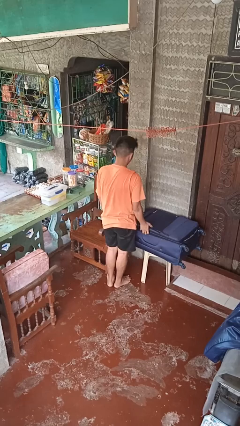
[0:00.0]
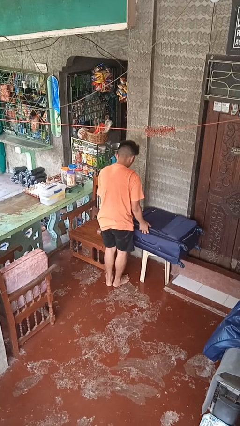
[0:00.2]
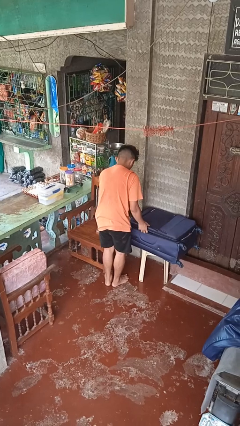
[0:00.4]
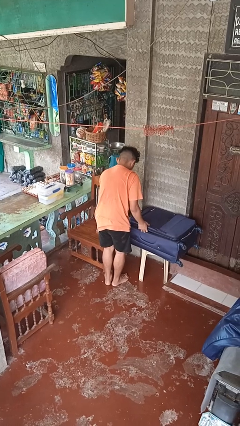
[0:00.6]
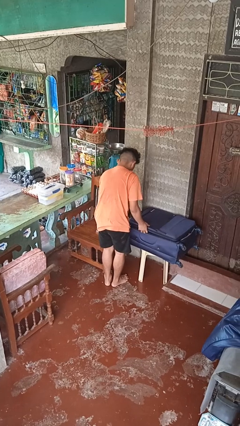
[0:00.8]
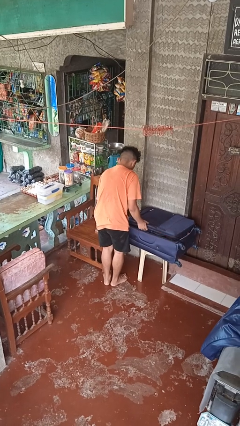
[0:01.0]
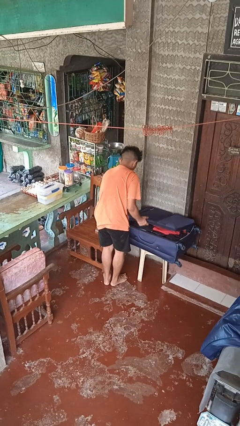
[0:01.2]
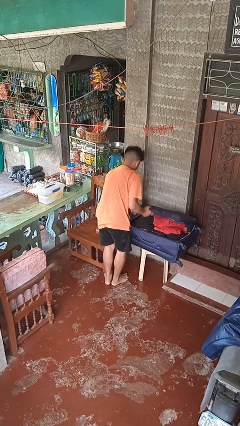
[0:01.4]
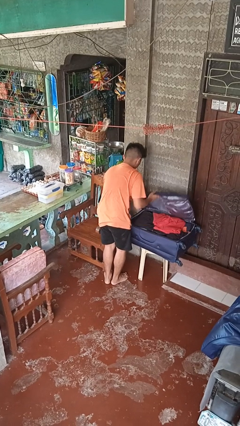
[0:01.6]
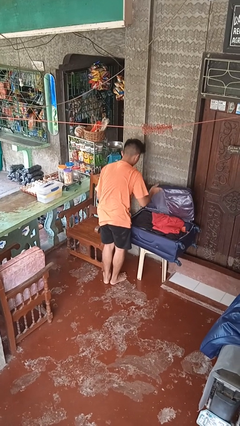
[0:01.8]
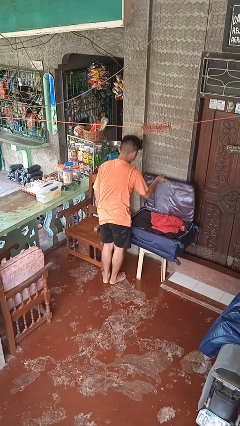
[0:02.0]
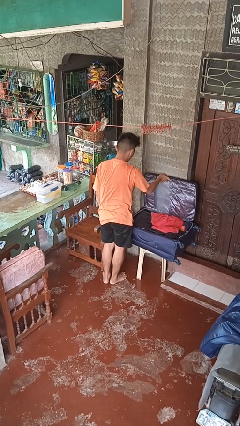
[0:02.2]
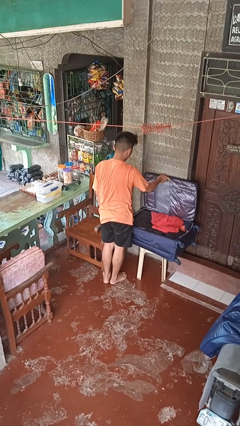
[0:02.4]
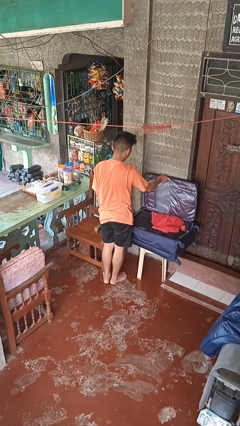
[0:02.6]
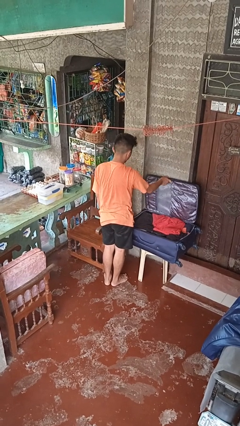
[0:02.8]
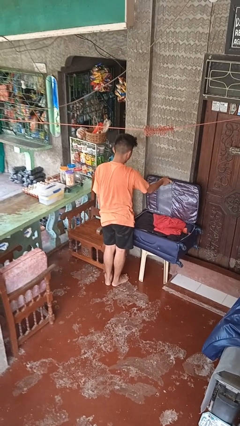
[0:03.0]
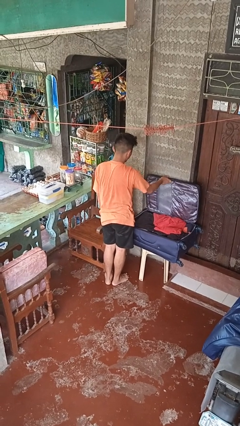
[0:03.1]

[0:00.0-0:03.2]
person opens suitcase

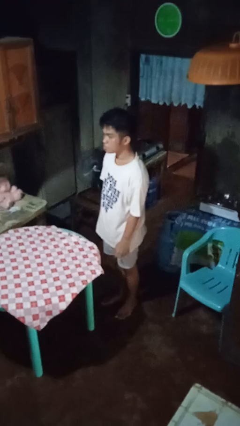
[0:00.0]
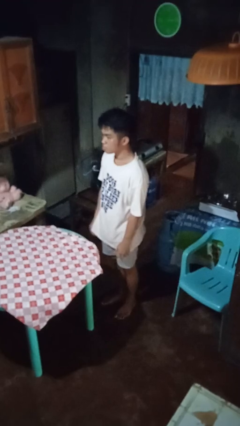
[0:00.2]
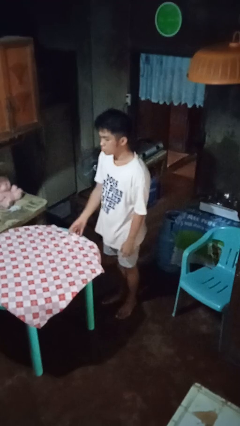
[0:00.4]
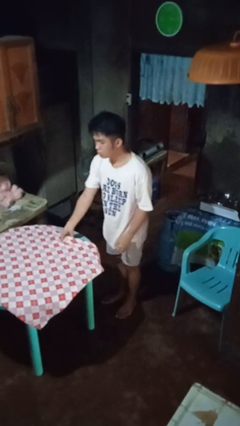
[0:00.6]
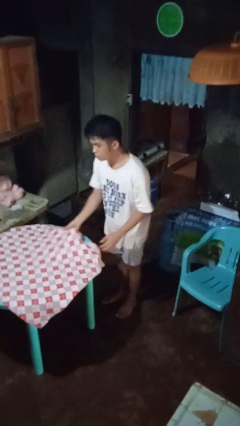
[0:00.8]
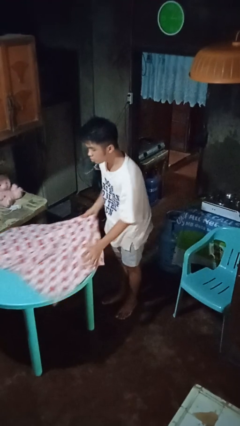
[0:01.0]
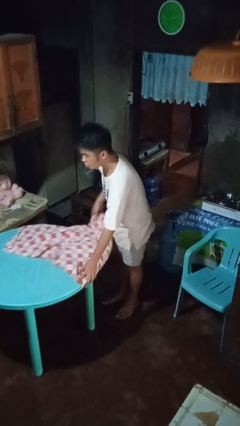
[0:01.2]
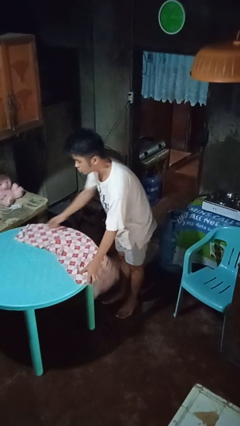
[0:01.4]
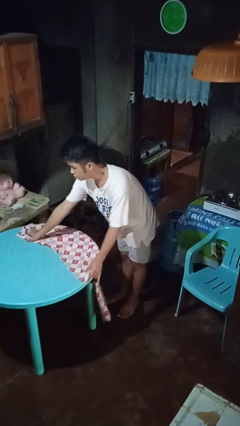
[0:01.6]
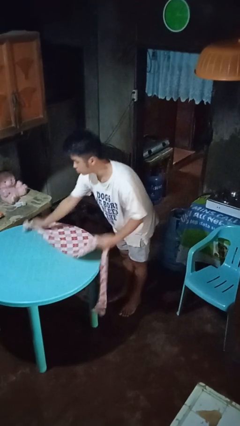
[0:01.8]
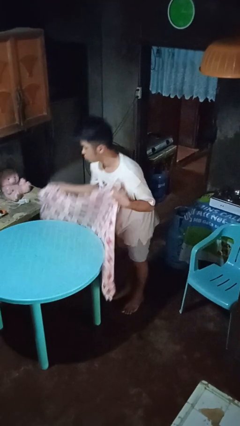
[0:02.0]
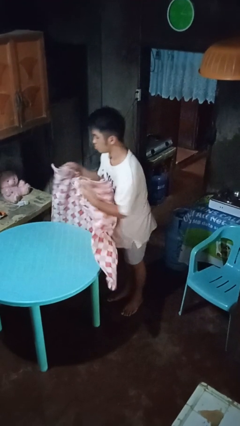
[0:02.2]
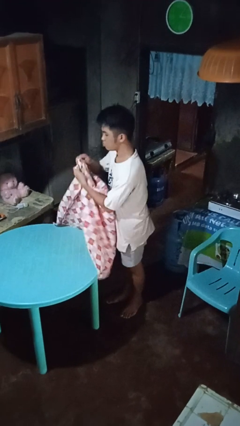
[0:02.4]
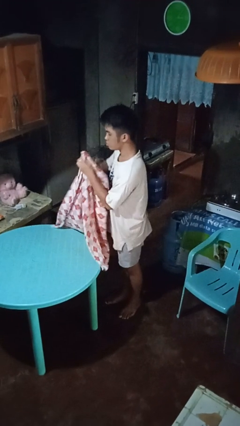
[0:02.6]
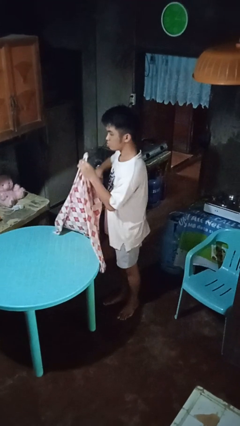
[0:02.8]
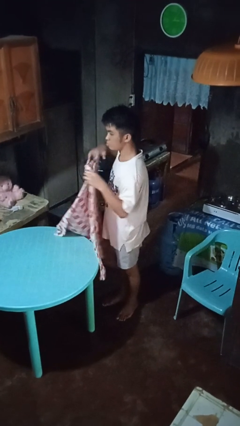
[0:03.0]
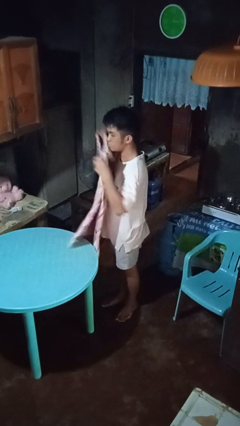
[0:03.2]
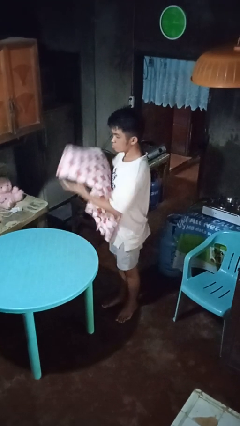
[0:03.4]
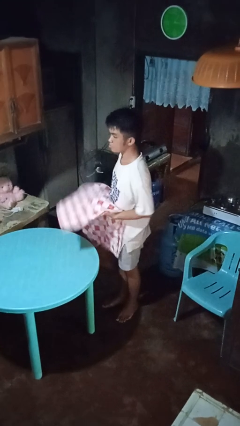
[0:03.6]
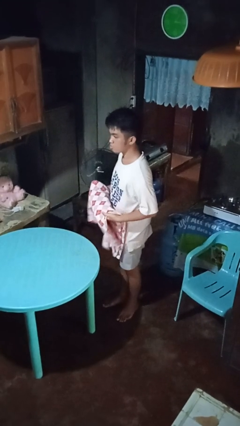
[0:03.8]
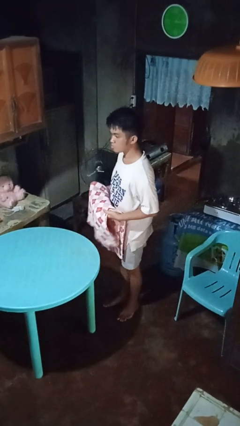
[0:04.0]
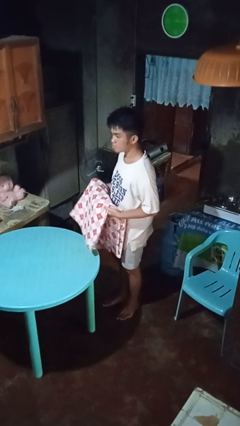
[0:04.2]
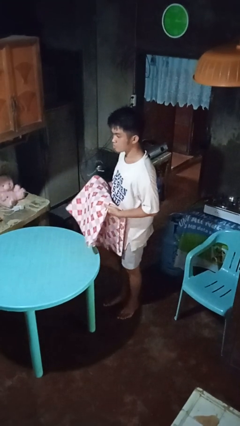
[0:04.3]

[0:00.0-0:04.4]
person folds tablecloth

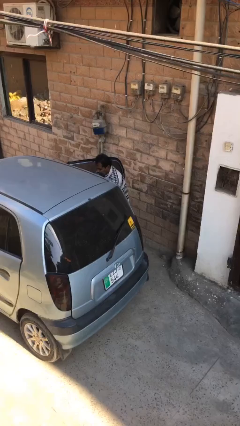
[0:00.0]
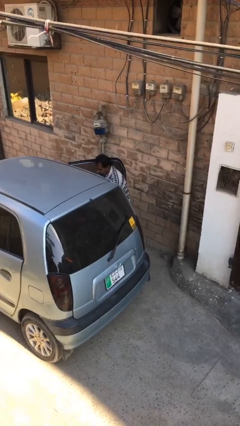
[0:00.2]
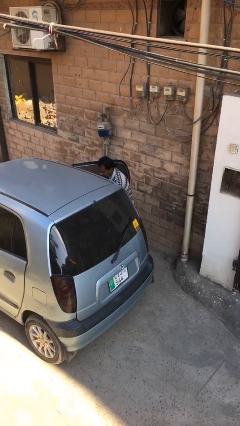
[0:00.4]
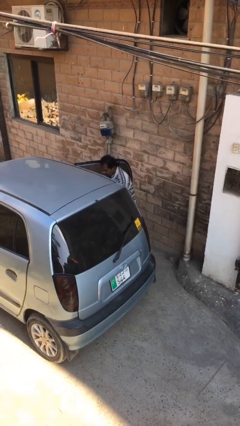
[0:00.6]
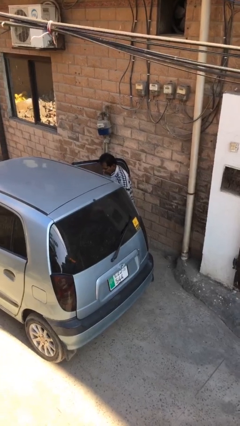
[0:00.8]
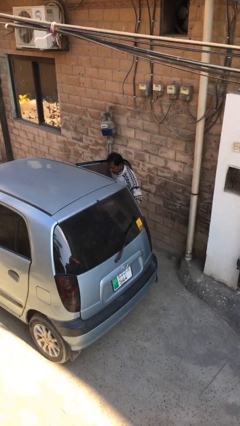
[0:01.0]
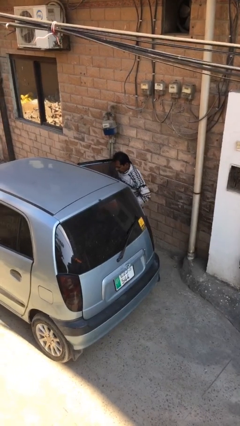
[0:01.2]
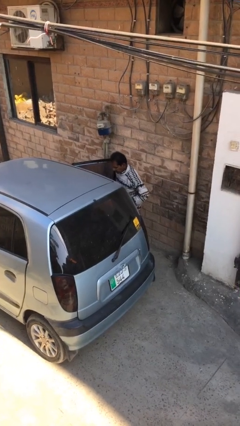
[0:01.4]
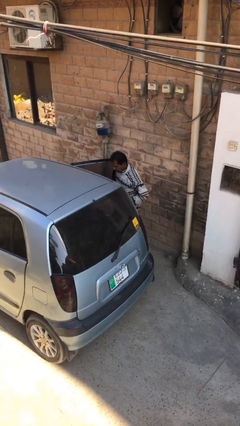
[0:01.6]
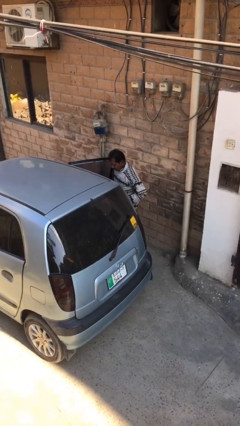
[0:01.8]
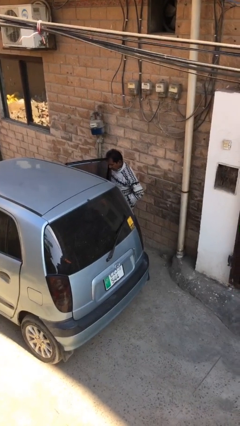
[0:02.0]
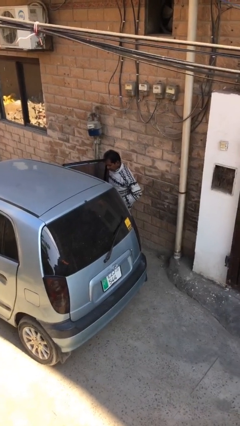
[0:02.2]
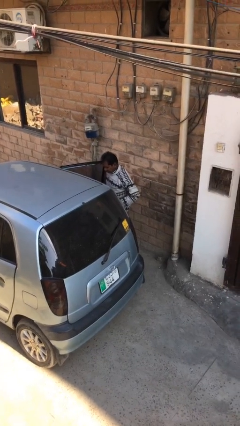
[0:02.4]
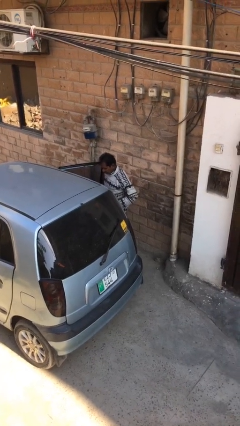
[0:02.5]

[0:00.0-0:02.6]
person unloads car

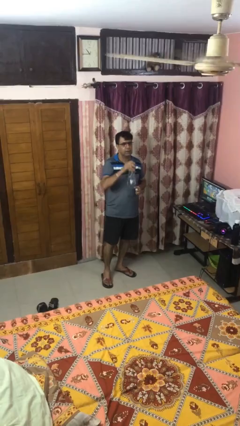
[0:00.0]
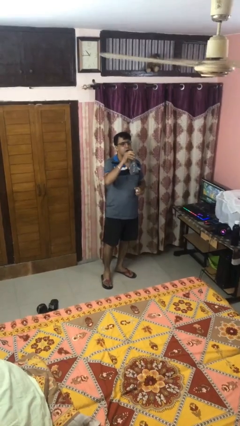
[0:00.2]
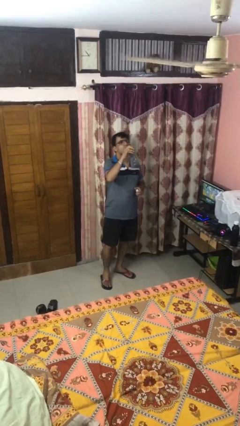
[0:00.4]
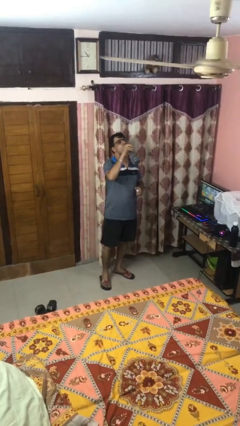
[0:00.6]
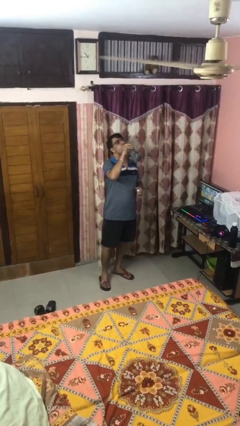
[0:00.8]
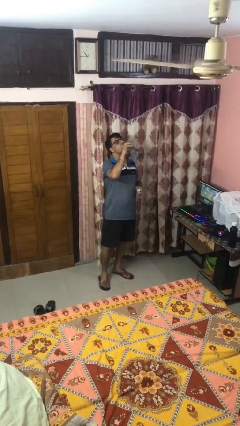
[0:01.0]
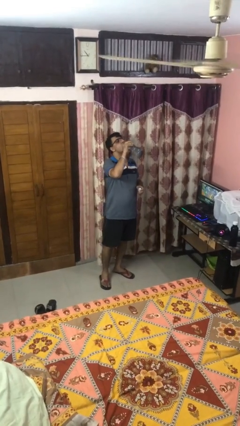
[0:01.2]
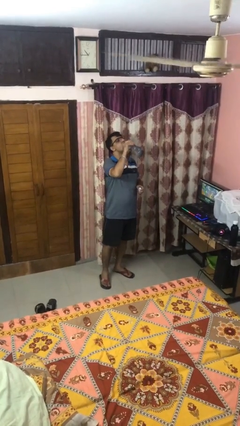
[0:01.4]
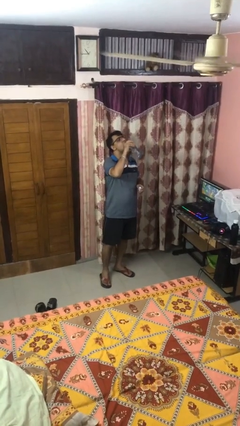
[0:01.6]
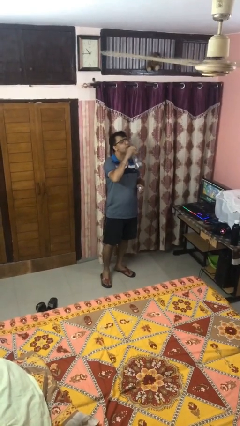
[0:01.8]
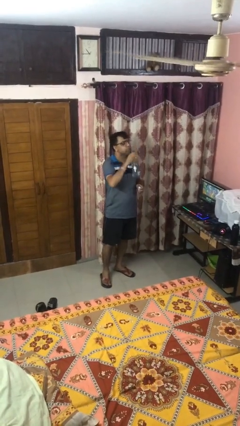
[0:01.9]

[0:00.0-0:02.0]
person drinks from bottle

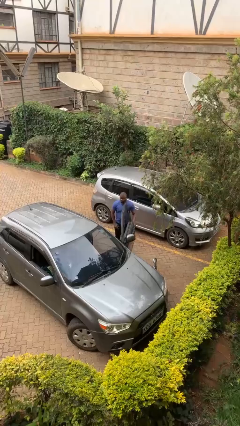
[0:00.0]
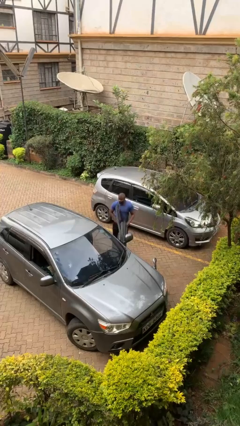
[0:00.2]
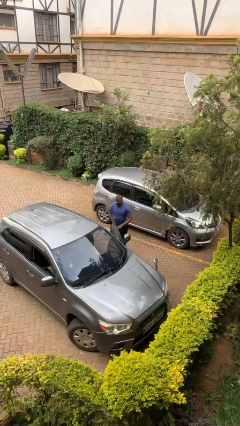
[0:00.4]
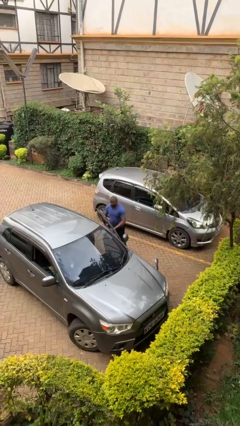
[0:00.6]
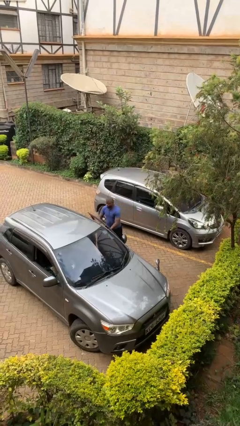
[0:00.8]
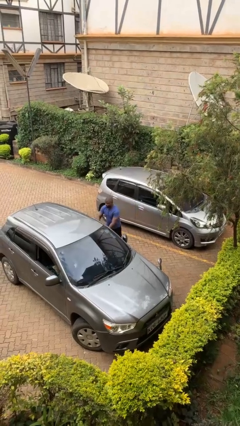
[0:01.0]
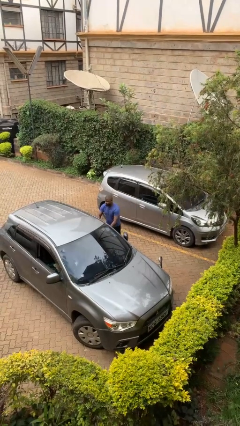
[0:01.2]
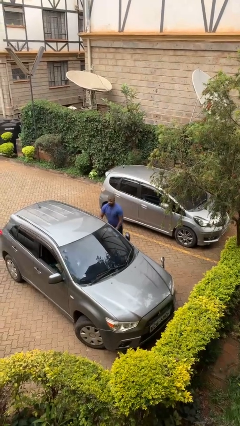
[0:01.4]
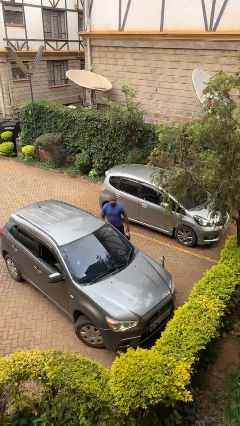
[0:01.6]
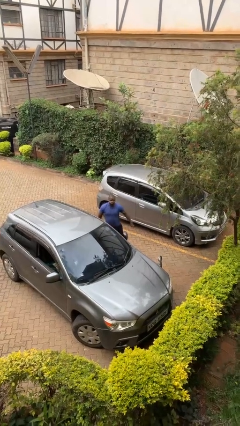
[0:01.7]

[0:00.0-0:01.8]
person closes car door

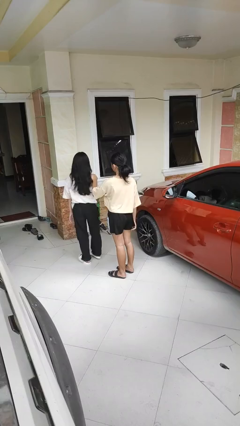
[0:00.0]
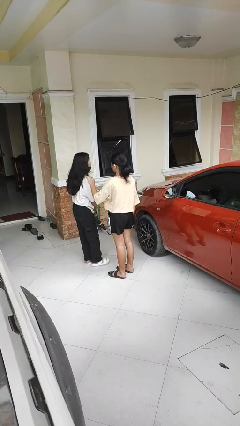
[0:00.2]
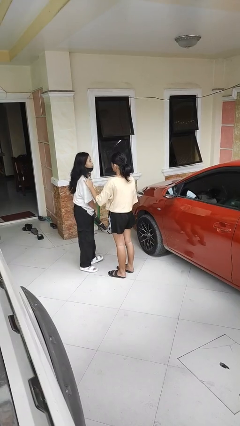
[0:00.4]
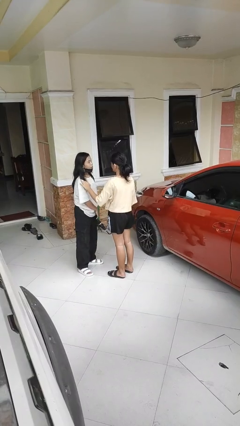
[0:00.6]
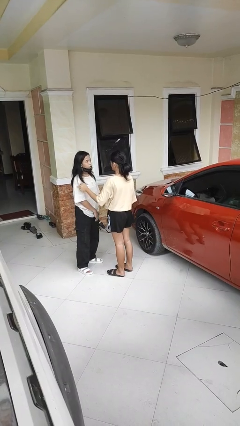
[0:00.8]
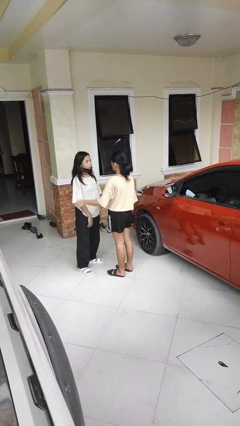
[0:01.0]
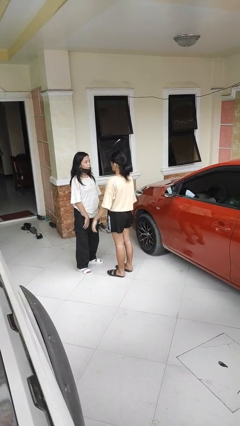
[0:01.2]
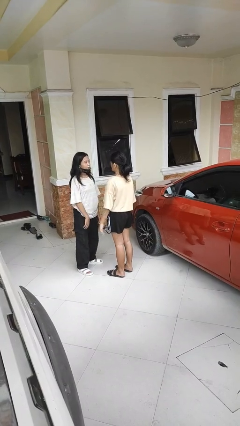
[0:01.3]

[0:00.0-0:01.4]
person spins person around

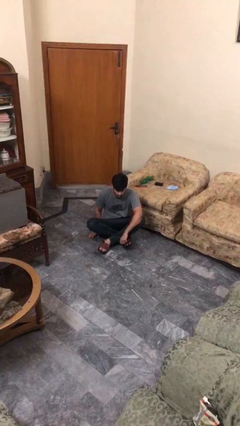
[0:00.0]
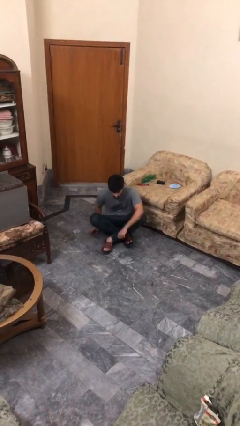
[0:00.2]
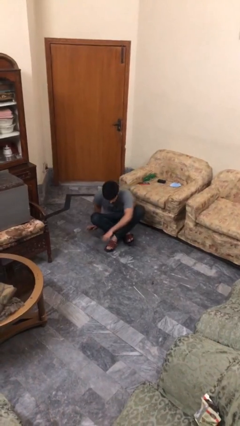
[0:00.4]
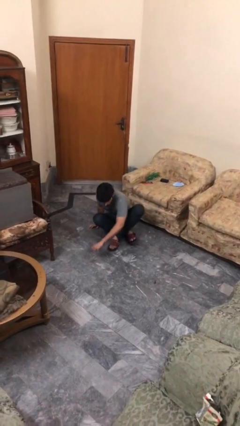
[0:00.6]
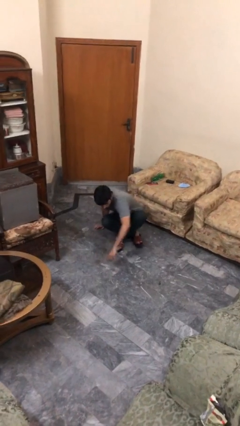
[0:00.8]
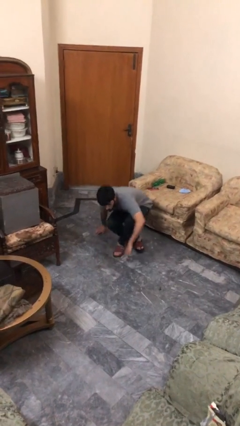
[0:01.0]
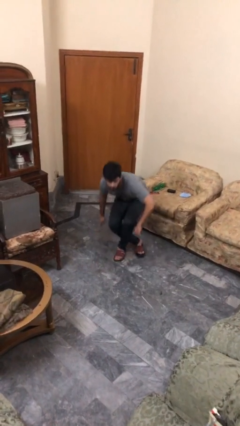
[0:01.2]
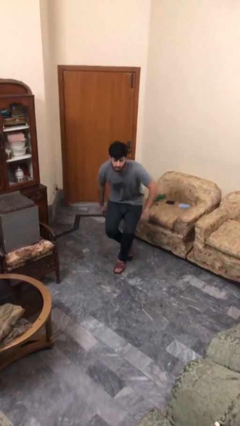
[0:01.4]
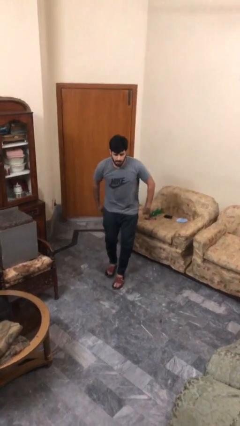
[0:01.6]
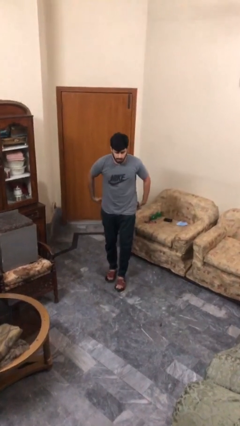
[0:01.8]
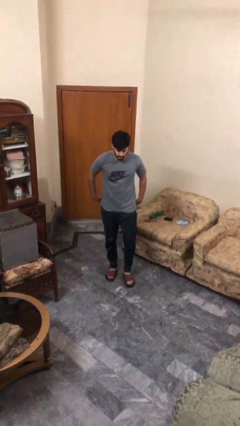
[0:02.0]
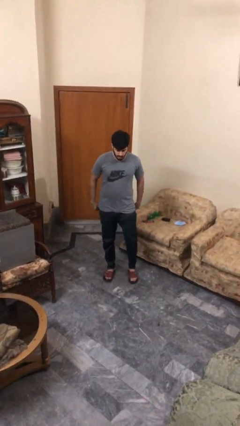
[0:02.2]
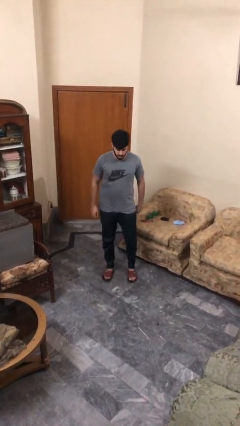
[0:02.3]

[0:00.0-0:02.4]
person stands up from floor
